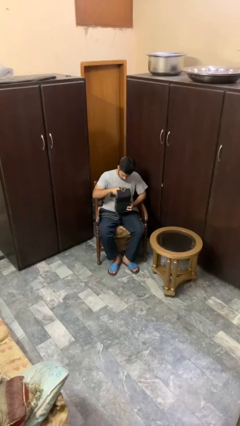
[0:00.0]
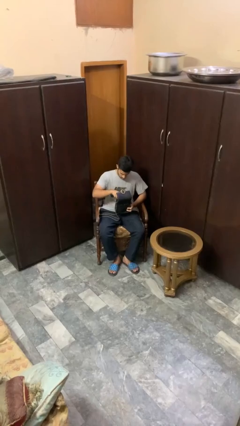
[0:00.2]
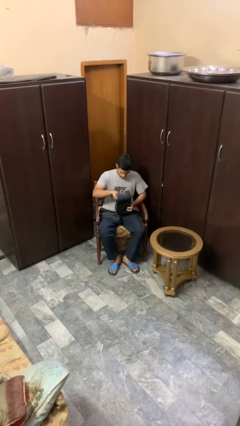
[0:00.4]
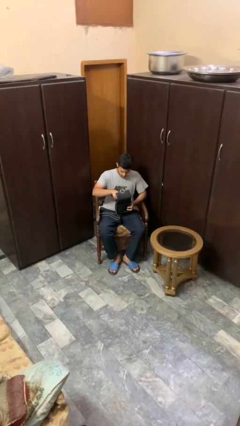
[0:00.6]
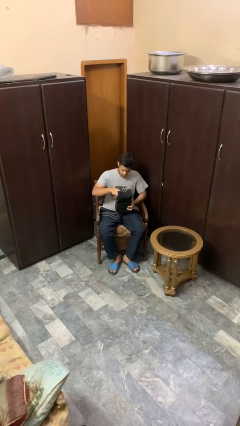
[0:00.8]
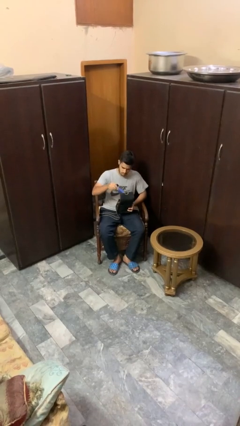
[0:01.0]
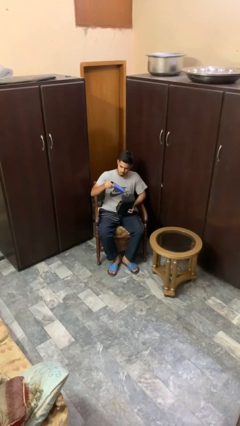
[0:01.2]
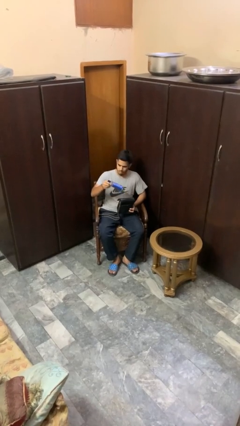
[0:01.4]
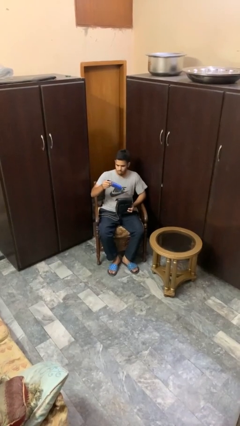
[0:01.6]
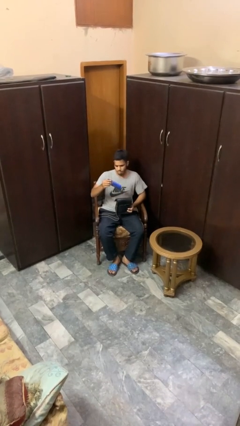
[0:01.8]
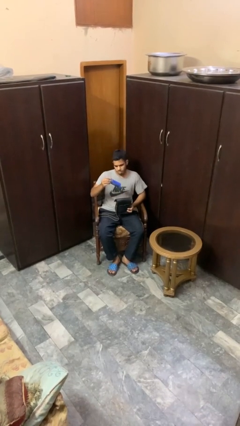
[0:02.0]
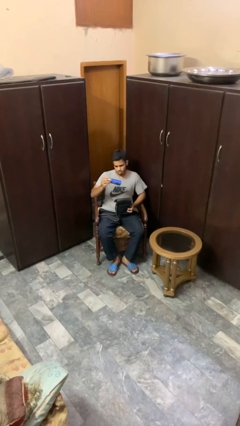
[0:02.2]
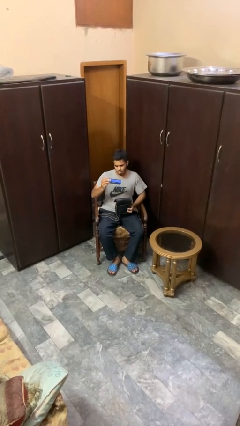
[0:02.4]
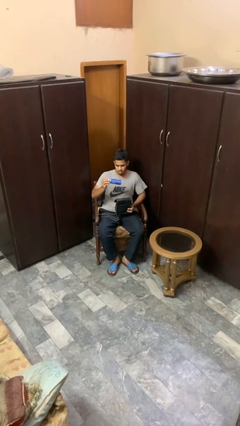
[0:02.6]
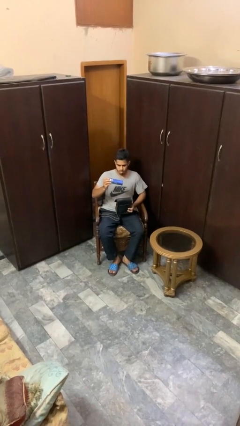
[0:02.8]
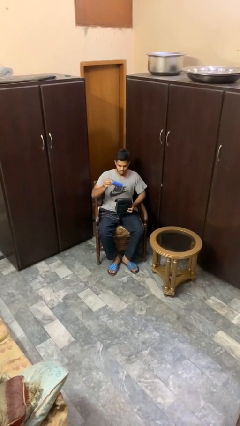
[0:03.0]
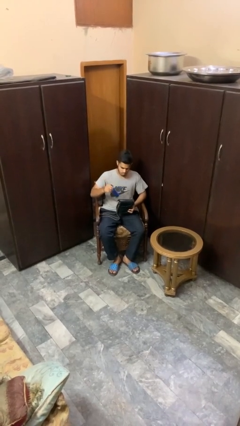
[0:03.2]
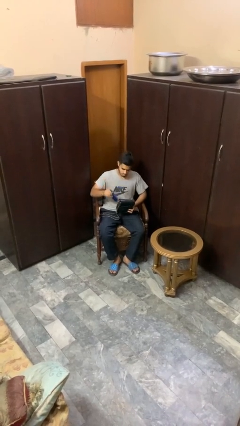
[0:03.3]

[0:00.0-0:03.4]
person takes object from purse

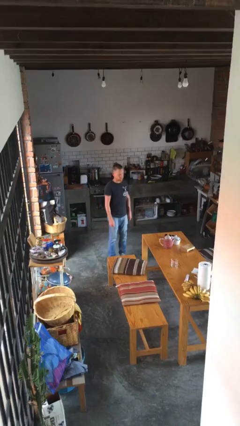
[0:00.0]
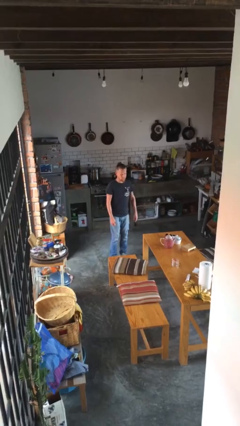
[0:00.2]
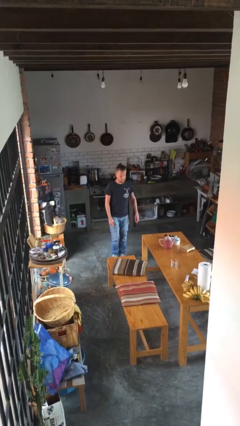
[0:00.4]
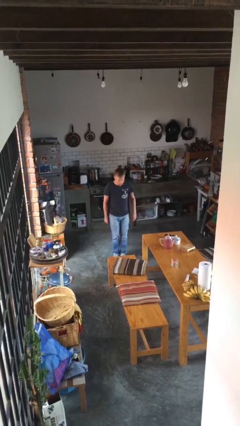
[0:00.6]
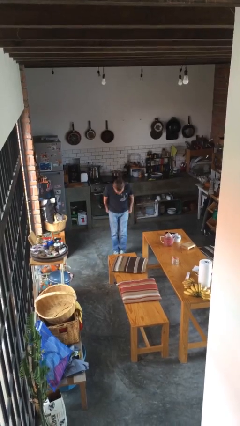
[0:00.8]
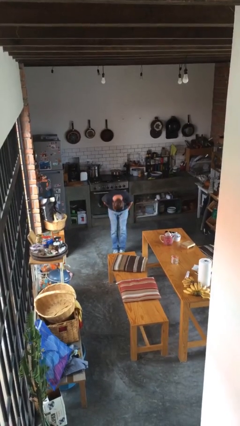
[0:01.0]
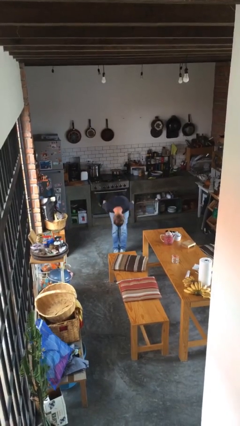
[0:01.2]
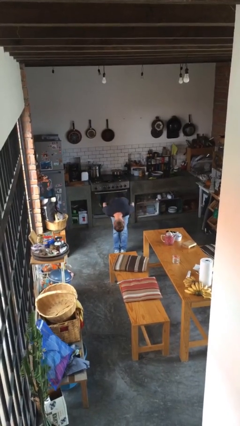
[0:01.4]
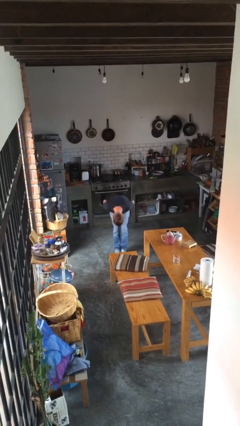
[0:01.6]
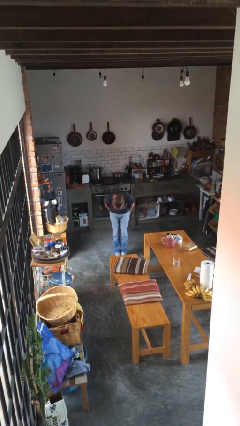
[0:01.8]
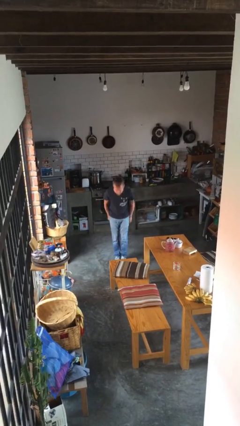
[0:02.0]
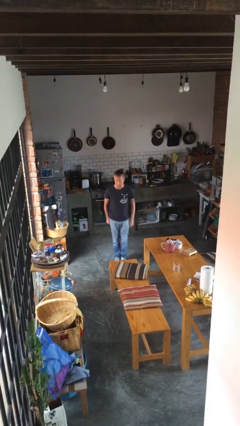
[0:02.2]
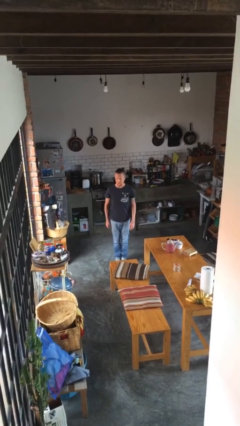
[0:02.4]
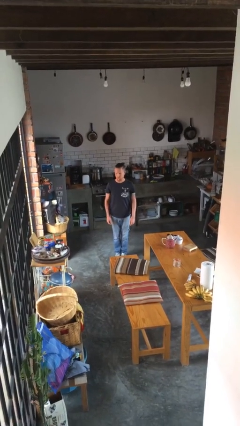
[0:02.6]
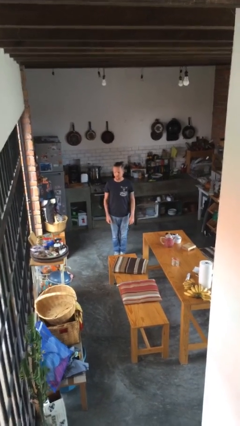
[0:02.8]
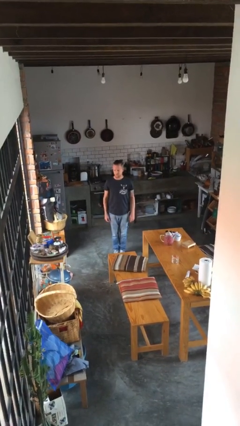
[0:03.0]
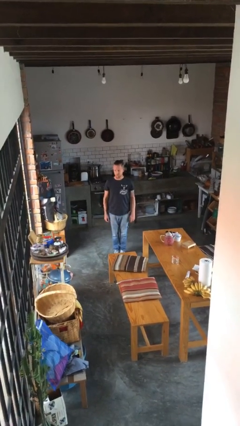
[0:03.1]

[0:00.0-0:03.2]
person bows

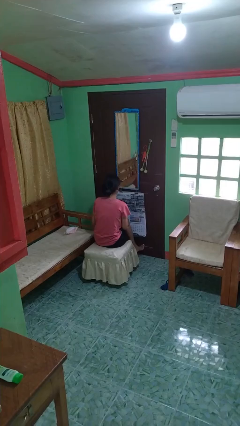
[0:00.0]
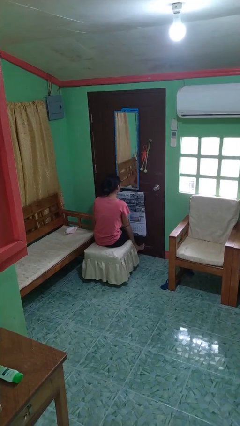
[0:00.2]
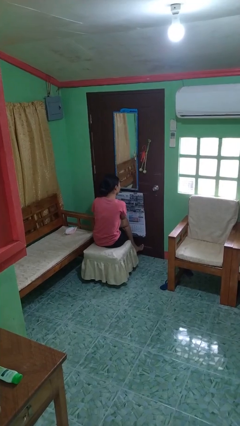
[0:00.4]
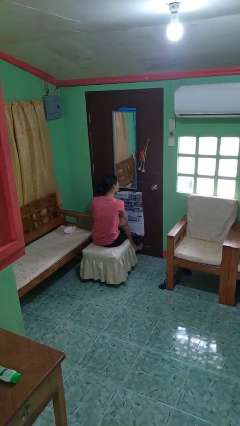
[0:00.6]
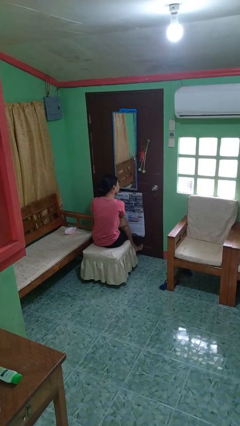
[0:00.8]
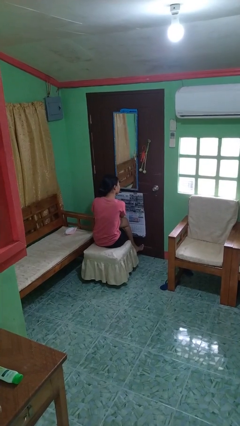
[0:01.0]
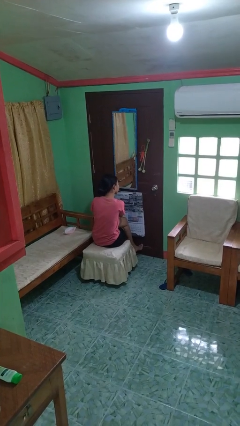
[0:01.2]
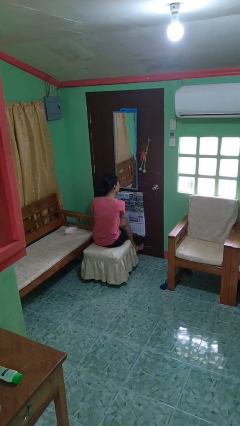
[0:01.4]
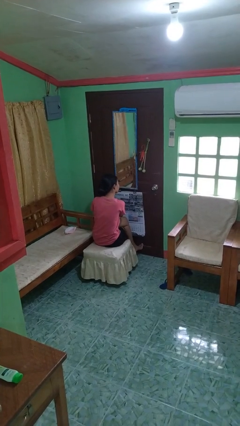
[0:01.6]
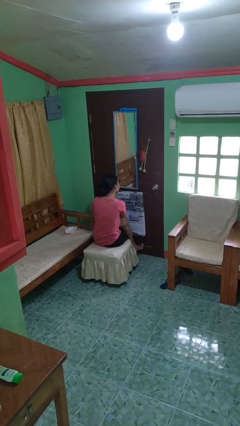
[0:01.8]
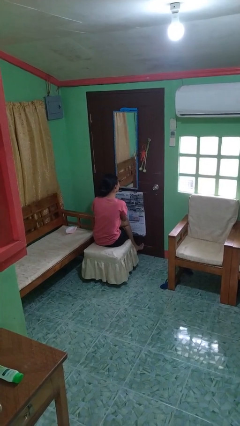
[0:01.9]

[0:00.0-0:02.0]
person takes off earrings

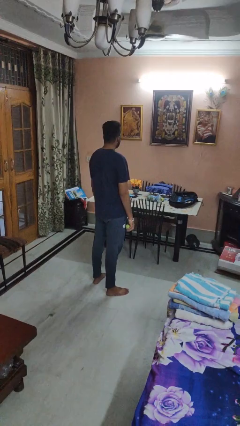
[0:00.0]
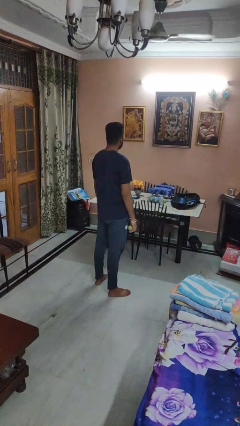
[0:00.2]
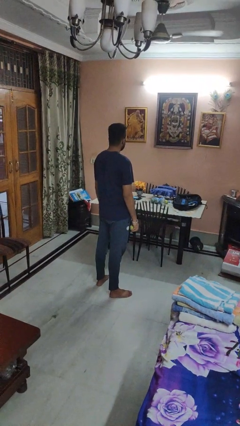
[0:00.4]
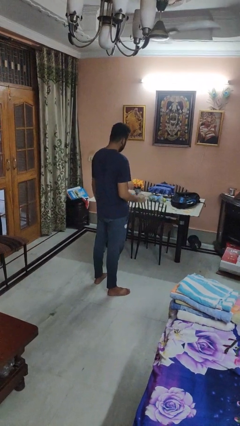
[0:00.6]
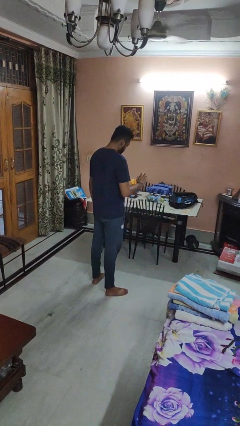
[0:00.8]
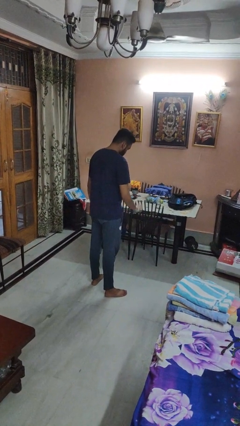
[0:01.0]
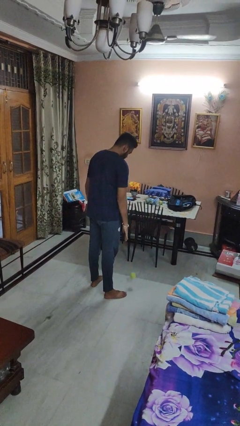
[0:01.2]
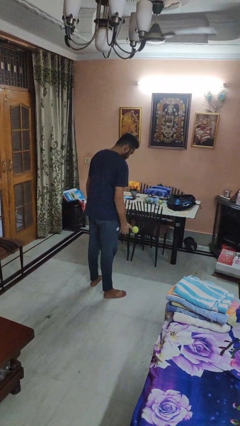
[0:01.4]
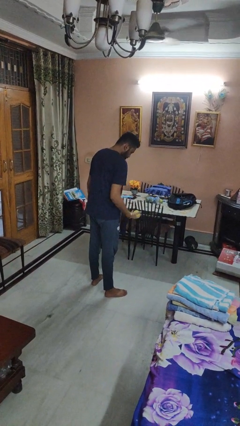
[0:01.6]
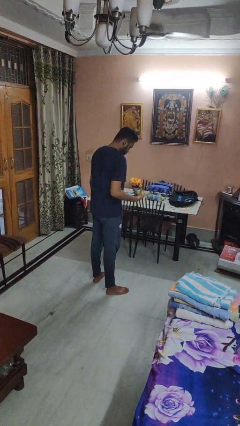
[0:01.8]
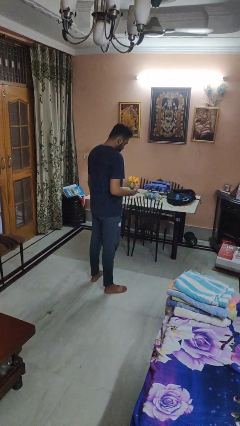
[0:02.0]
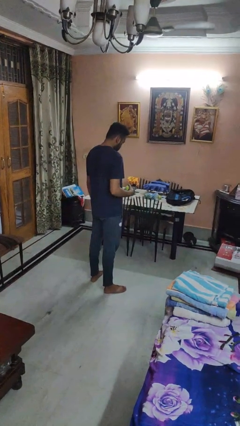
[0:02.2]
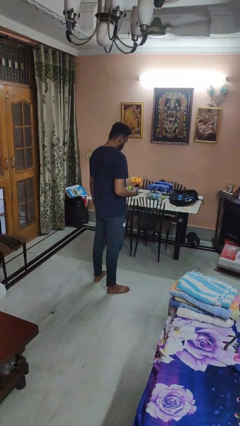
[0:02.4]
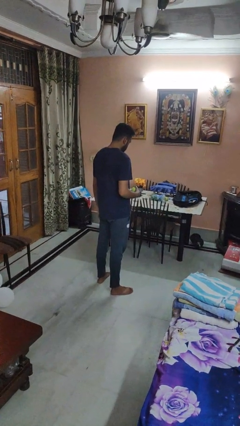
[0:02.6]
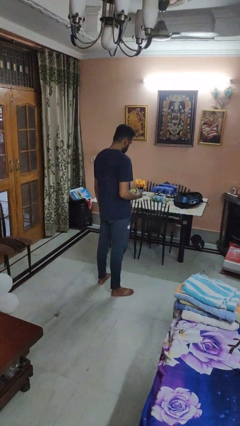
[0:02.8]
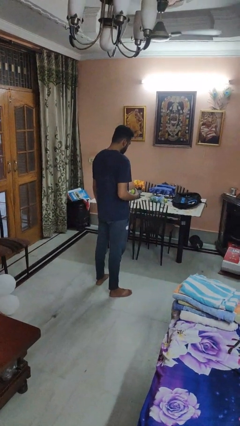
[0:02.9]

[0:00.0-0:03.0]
person bounces ball on floor

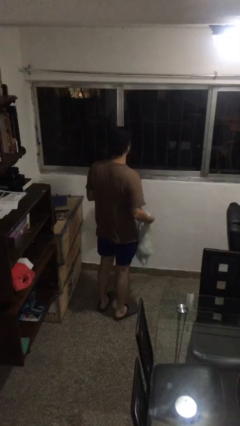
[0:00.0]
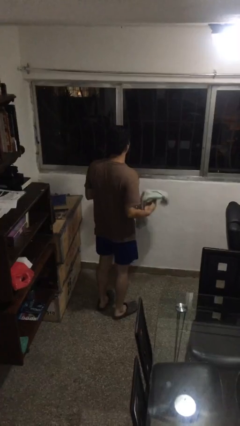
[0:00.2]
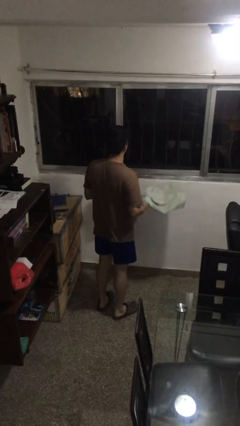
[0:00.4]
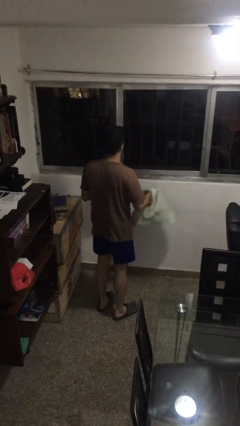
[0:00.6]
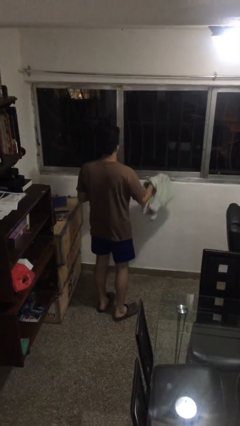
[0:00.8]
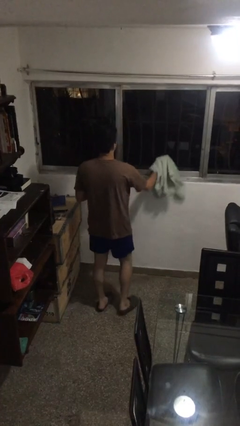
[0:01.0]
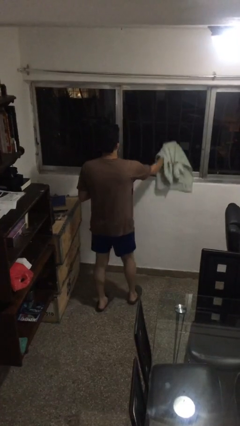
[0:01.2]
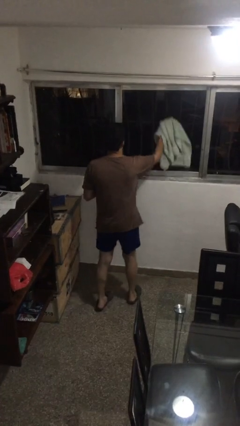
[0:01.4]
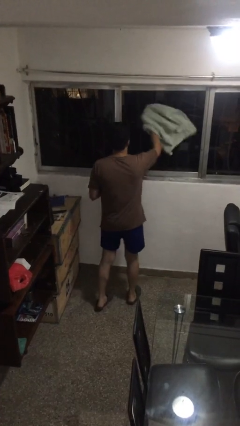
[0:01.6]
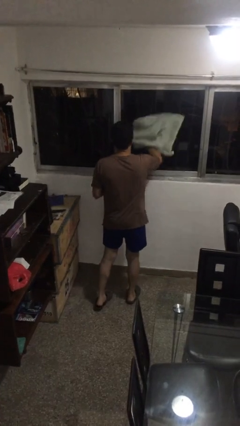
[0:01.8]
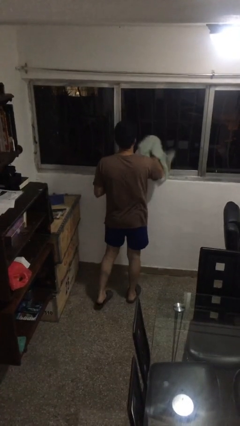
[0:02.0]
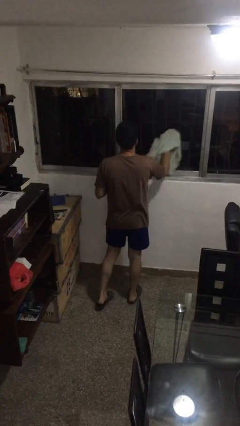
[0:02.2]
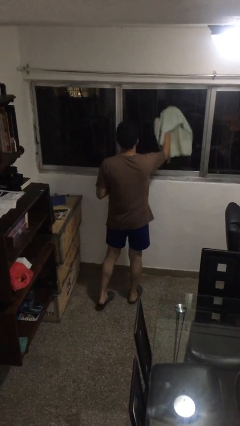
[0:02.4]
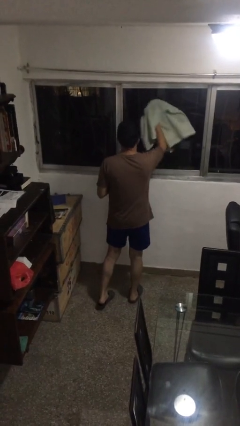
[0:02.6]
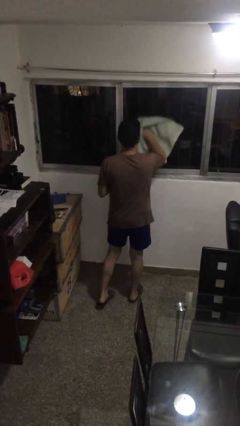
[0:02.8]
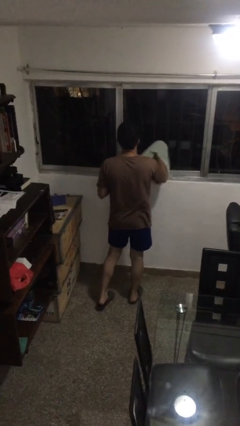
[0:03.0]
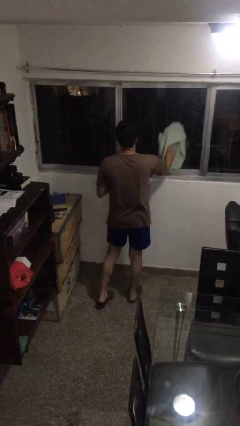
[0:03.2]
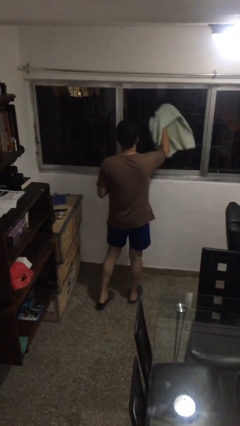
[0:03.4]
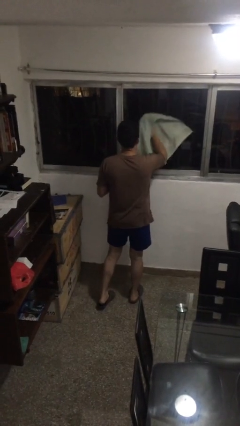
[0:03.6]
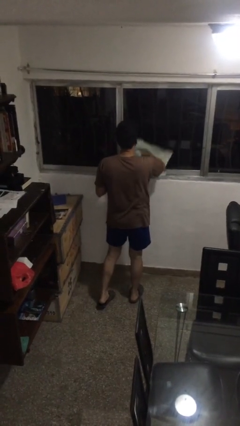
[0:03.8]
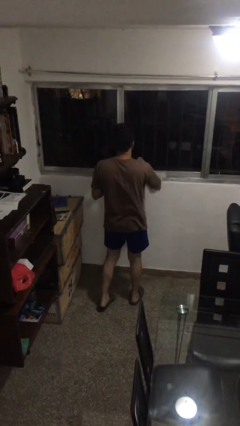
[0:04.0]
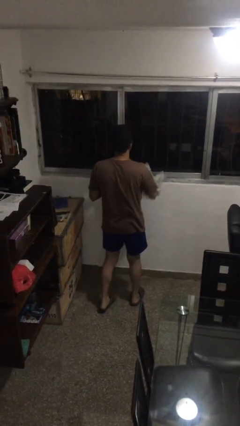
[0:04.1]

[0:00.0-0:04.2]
person washes window

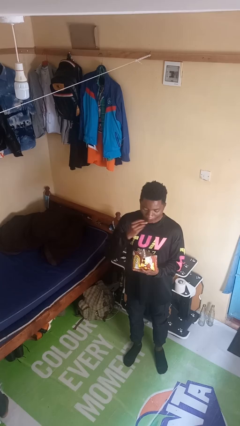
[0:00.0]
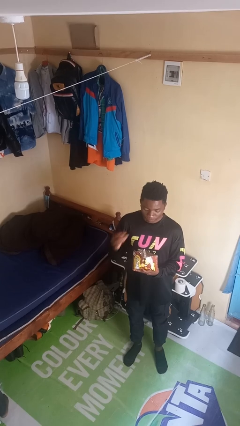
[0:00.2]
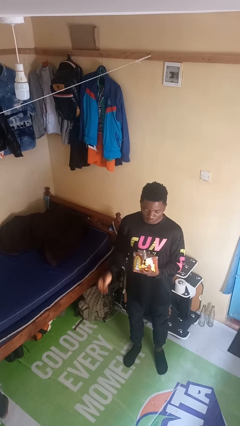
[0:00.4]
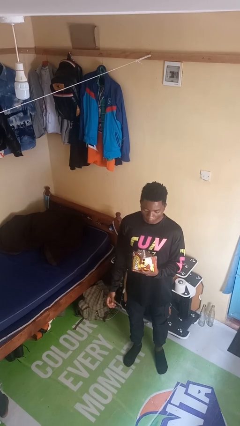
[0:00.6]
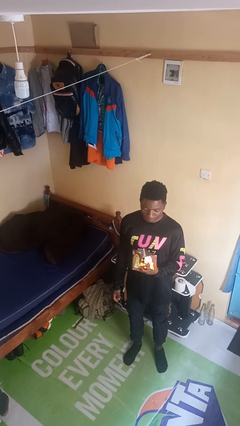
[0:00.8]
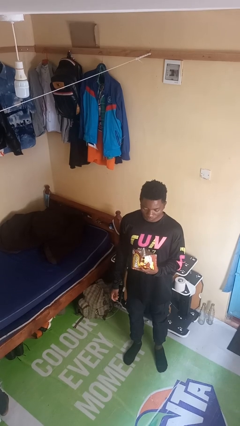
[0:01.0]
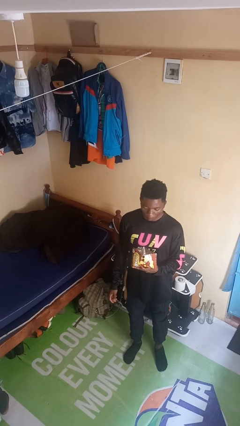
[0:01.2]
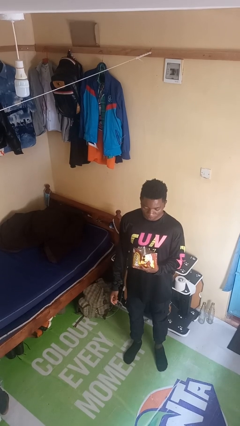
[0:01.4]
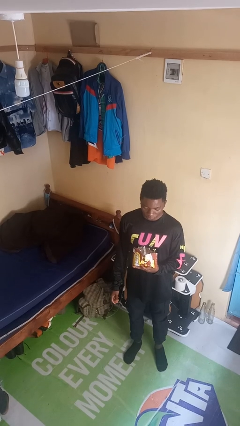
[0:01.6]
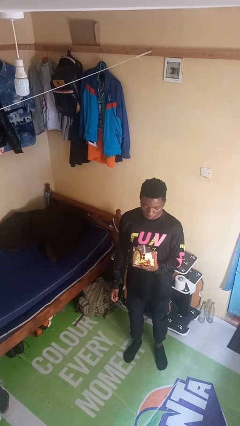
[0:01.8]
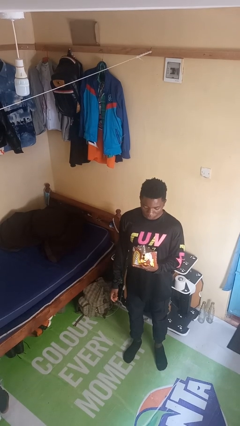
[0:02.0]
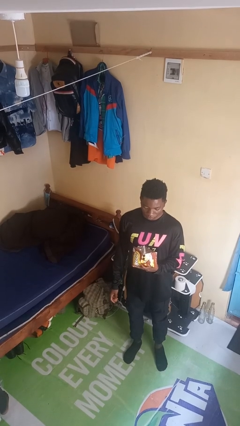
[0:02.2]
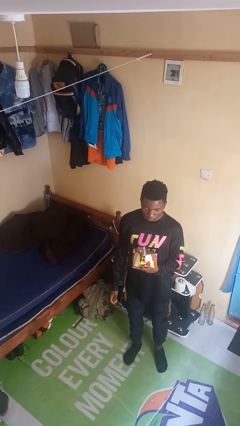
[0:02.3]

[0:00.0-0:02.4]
person eats snack from bag
